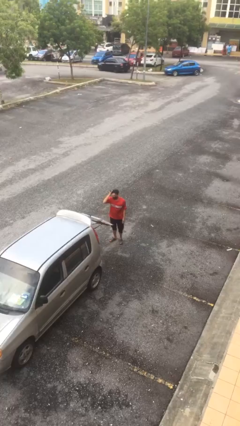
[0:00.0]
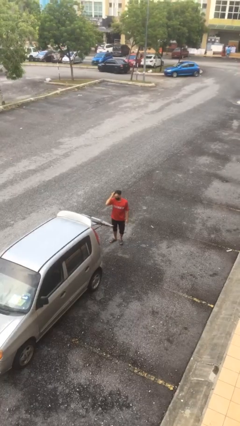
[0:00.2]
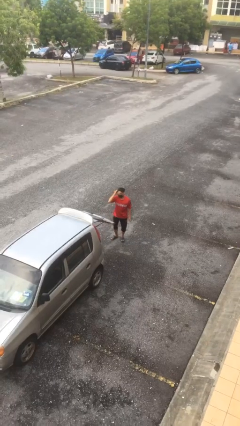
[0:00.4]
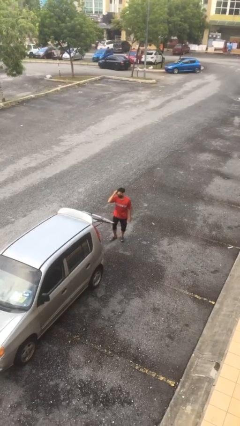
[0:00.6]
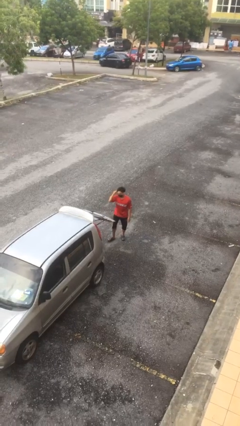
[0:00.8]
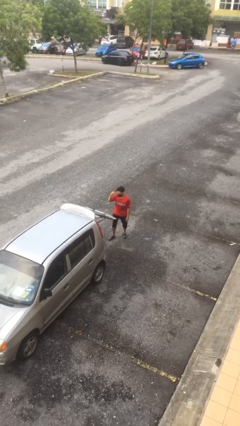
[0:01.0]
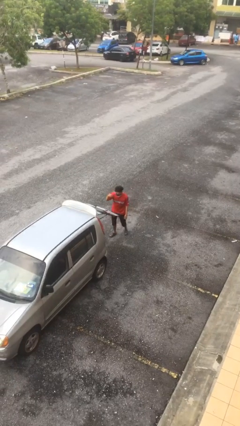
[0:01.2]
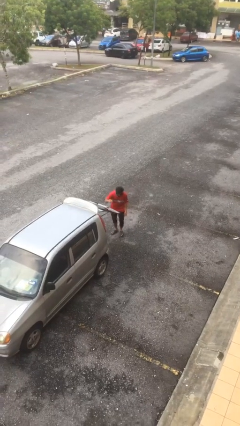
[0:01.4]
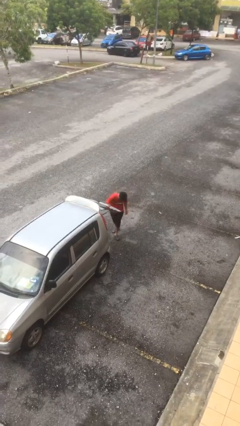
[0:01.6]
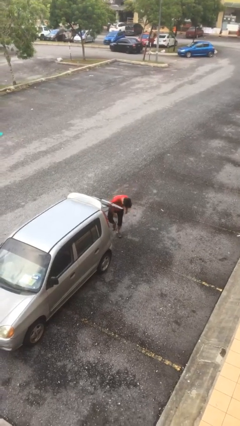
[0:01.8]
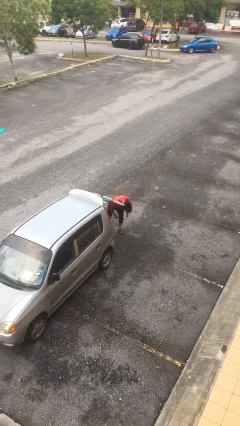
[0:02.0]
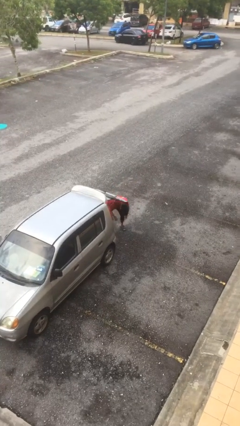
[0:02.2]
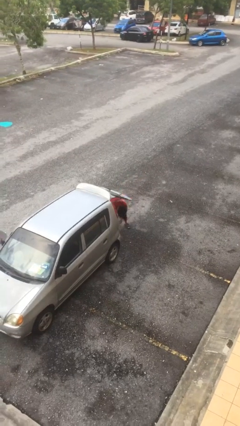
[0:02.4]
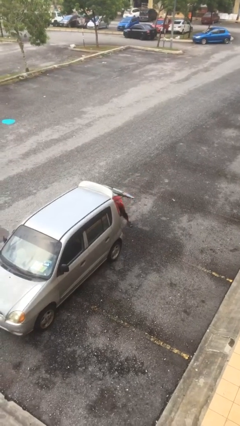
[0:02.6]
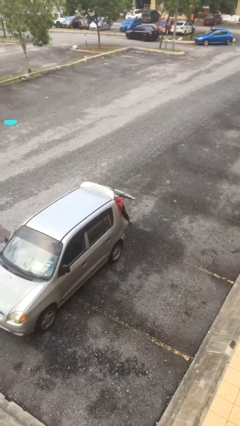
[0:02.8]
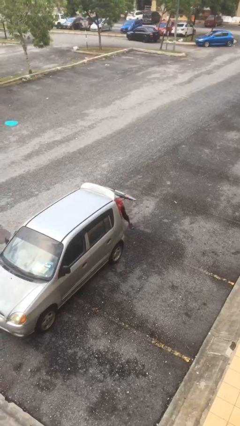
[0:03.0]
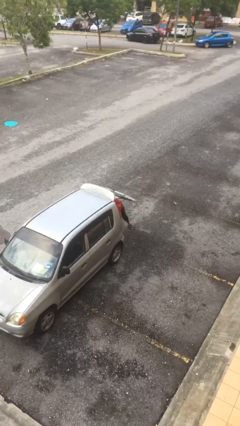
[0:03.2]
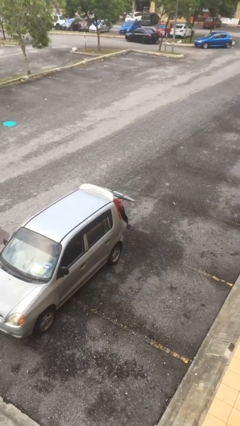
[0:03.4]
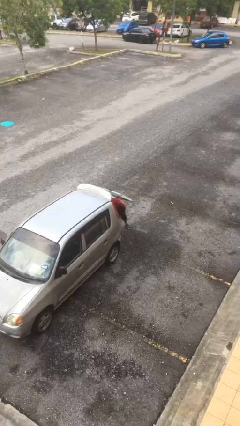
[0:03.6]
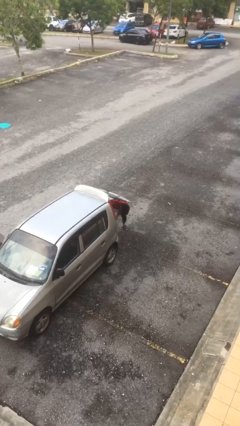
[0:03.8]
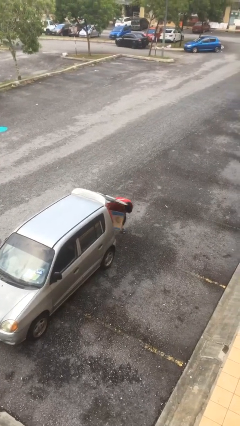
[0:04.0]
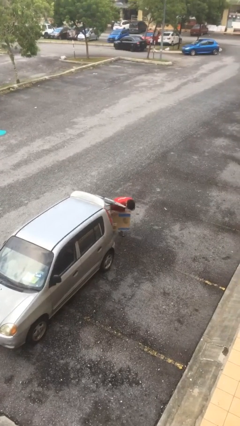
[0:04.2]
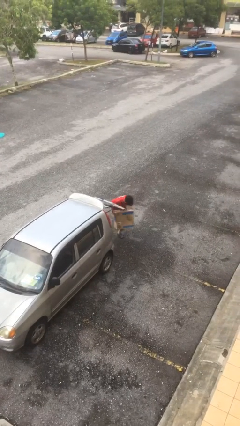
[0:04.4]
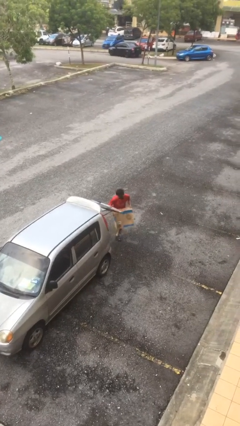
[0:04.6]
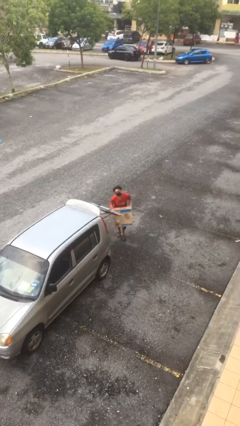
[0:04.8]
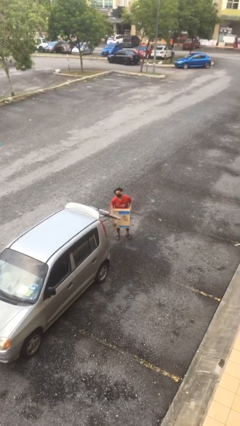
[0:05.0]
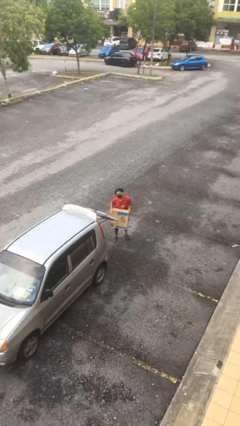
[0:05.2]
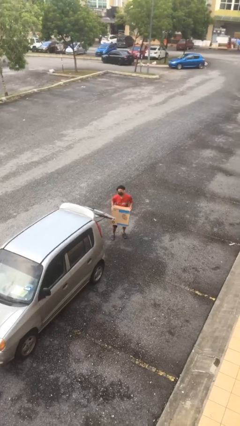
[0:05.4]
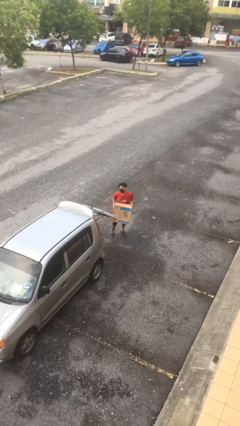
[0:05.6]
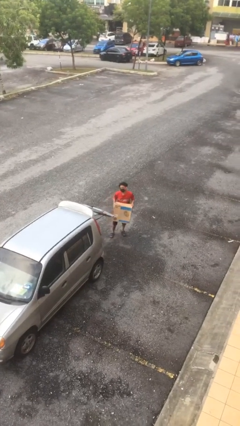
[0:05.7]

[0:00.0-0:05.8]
person unloads car

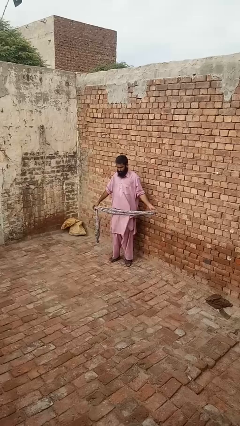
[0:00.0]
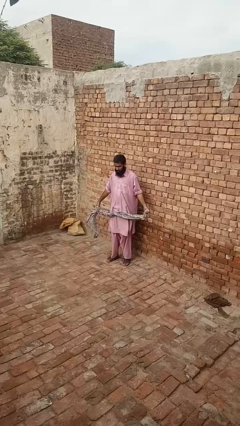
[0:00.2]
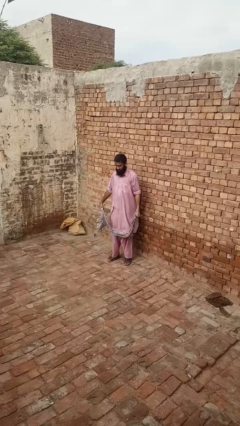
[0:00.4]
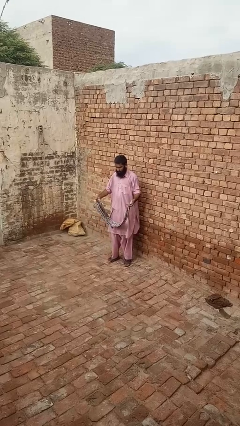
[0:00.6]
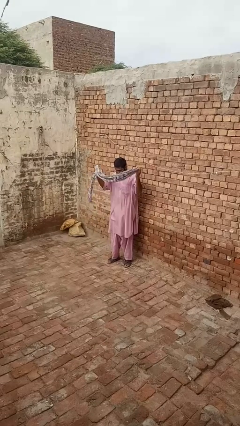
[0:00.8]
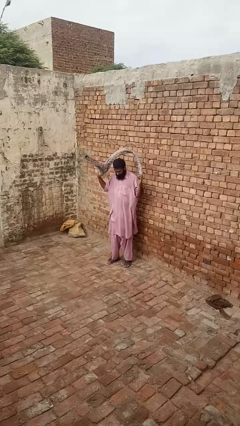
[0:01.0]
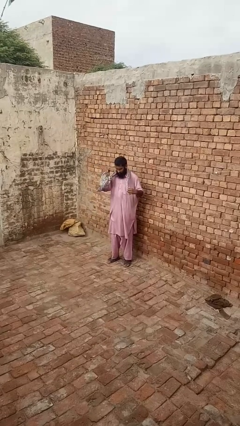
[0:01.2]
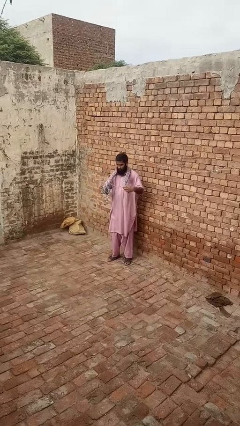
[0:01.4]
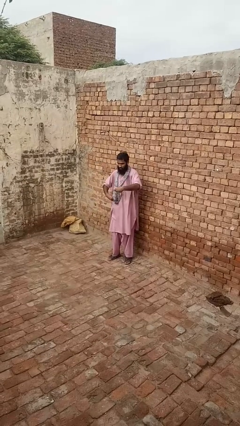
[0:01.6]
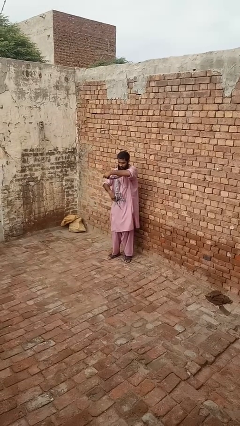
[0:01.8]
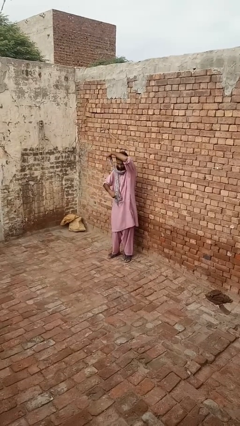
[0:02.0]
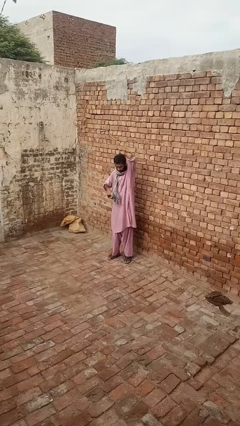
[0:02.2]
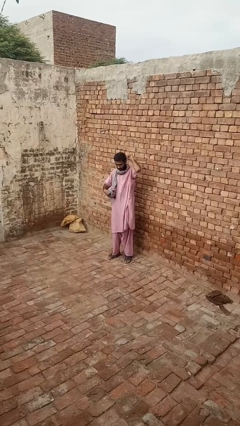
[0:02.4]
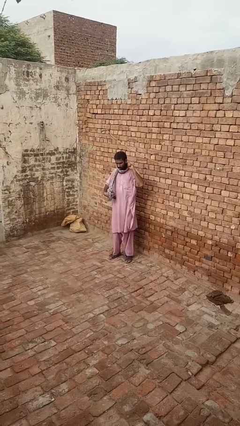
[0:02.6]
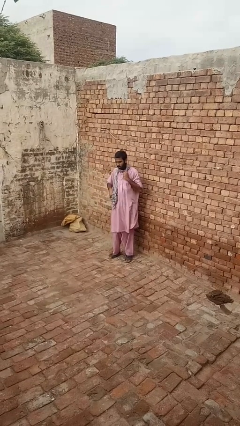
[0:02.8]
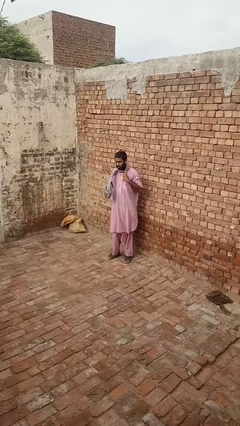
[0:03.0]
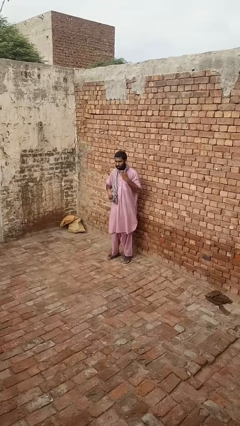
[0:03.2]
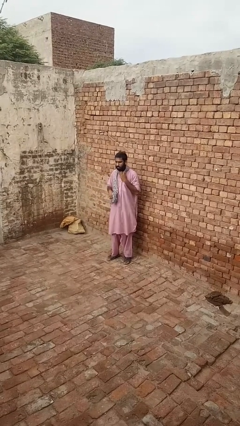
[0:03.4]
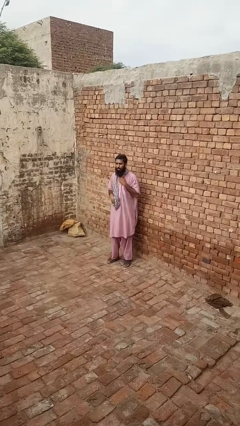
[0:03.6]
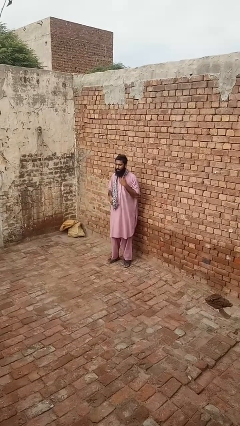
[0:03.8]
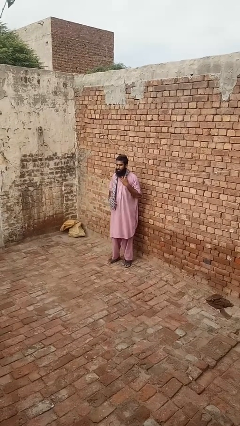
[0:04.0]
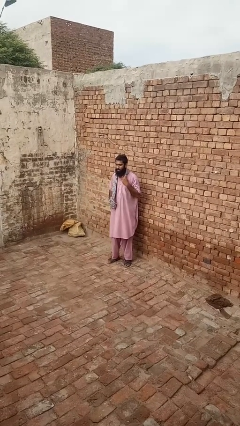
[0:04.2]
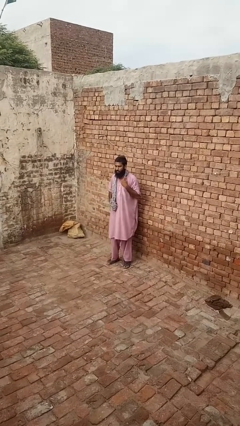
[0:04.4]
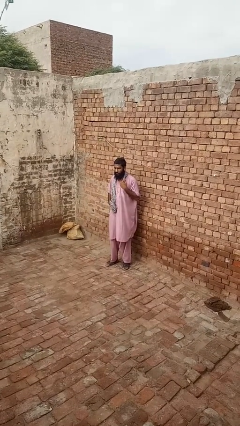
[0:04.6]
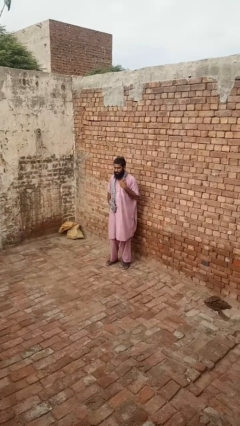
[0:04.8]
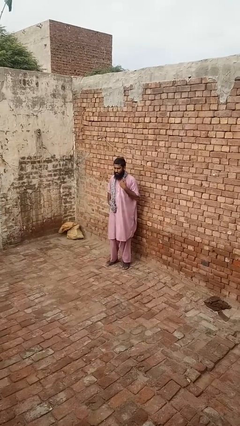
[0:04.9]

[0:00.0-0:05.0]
person puts on scarf

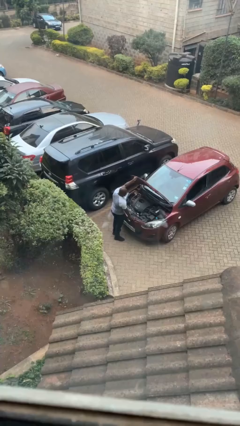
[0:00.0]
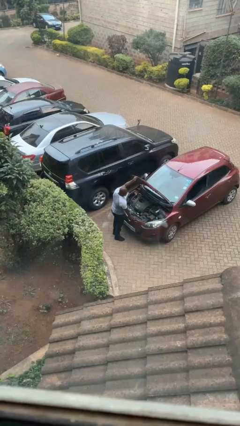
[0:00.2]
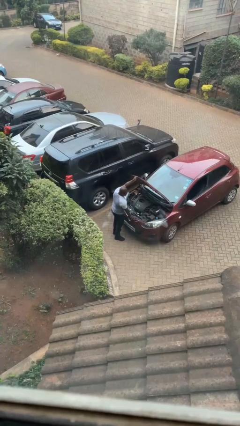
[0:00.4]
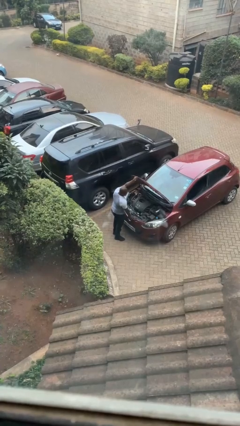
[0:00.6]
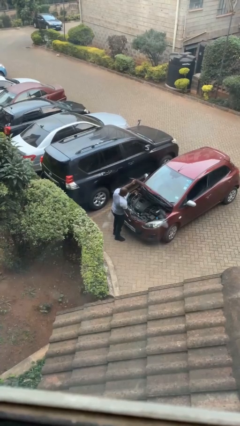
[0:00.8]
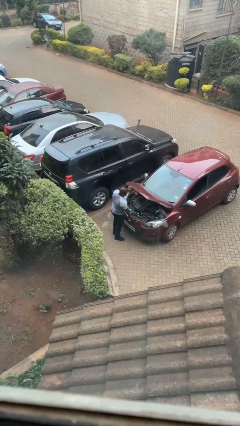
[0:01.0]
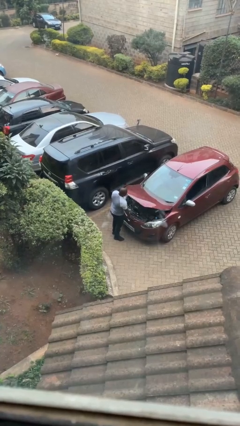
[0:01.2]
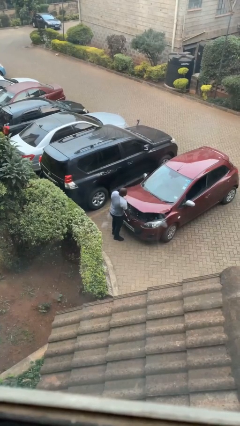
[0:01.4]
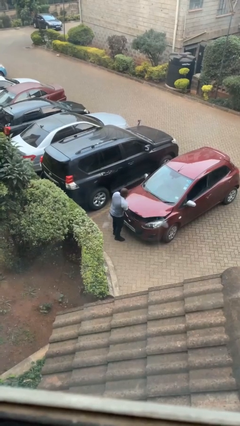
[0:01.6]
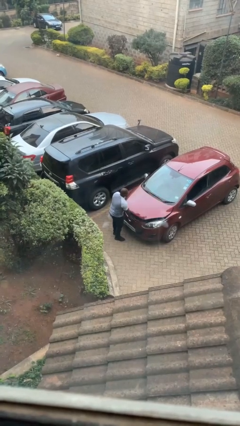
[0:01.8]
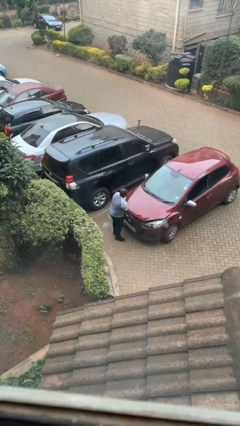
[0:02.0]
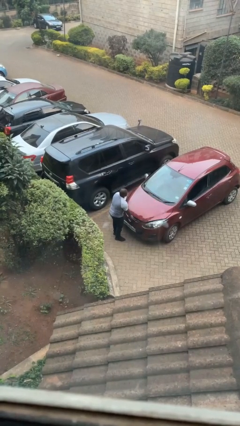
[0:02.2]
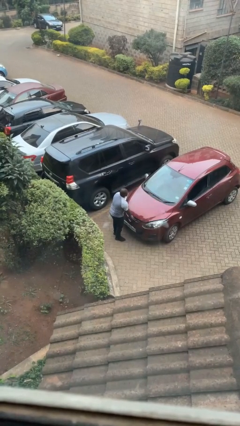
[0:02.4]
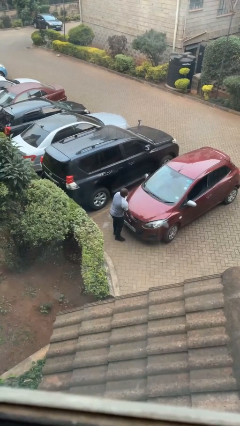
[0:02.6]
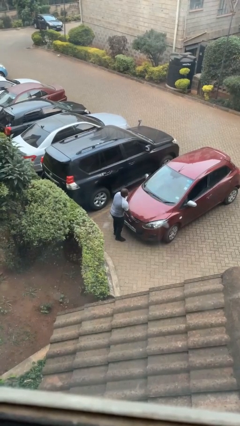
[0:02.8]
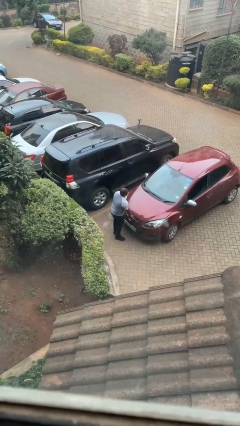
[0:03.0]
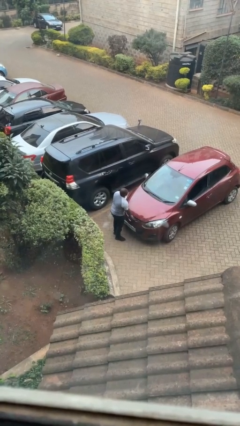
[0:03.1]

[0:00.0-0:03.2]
person closes car hood

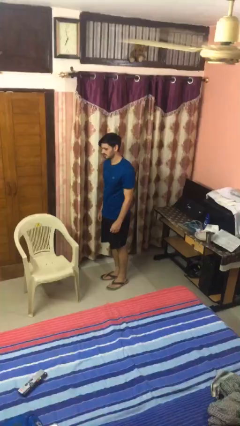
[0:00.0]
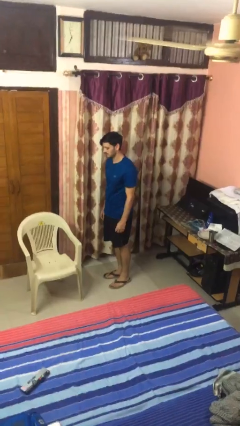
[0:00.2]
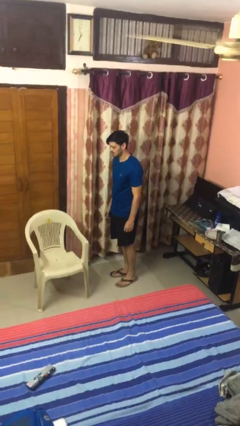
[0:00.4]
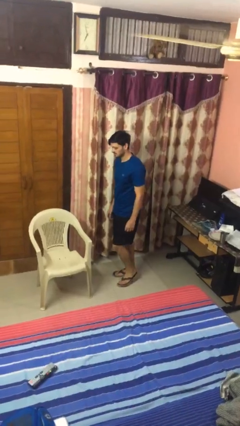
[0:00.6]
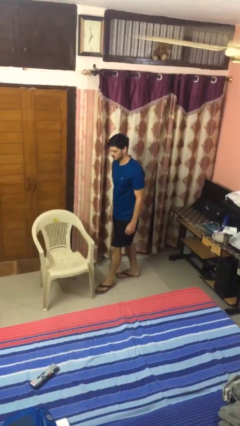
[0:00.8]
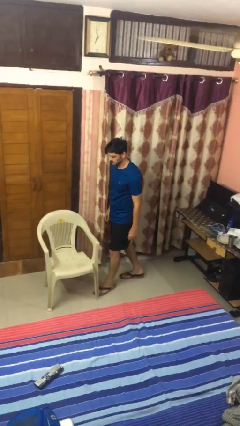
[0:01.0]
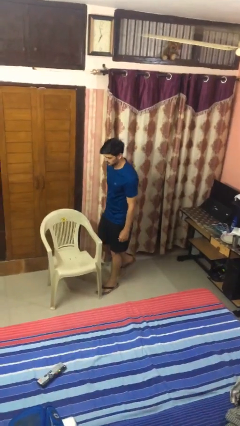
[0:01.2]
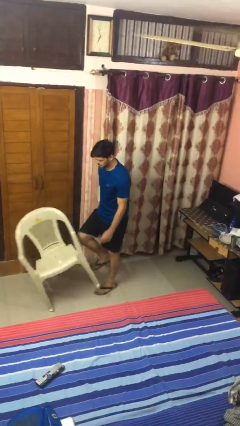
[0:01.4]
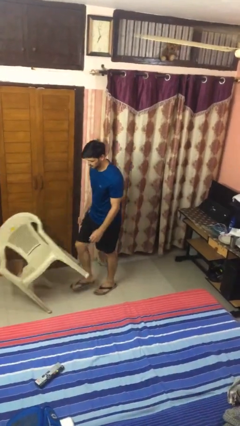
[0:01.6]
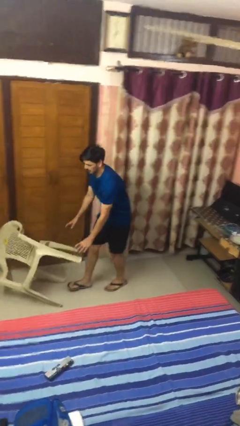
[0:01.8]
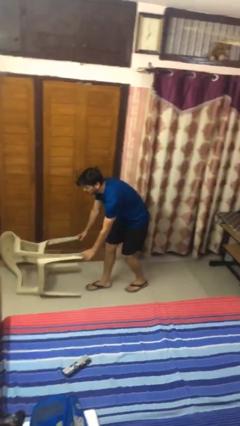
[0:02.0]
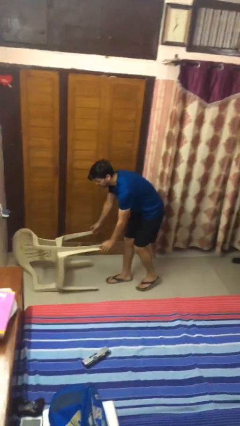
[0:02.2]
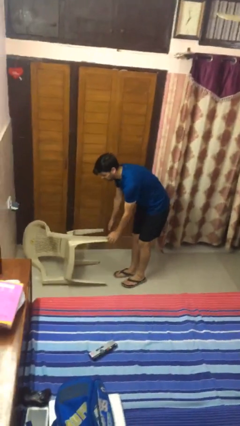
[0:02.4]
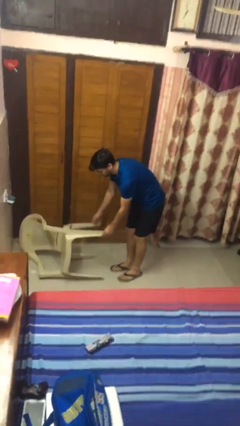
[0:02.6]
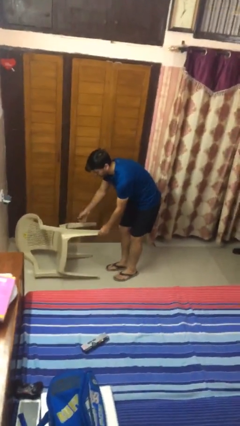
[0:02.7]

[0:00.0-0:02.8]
person knocks over furniture

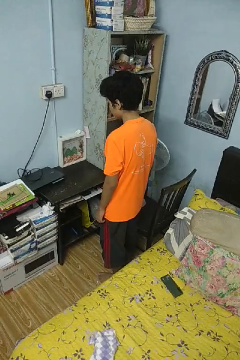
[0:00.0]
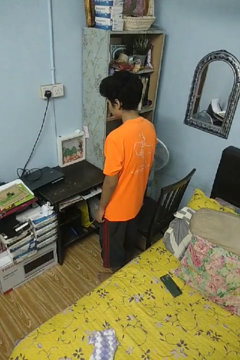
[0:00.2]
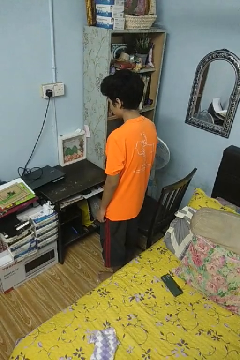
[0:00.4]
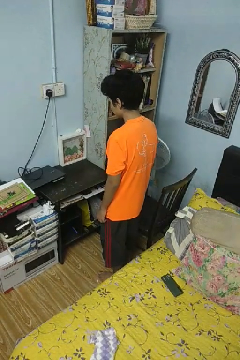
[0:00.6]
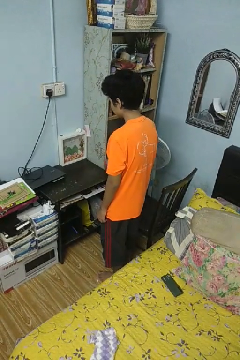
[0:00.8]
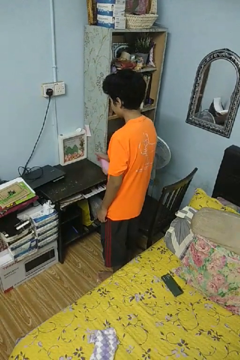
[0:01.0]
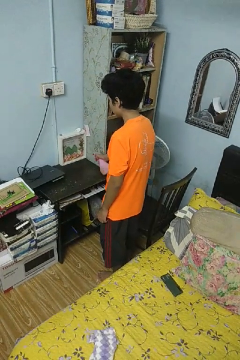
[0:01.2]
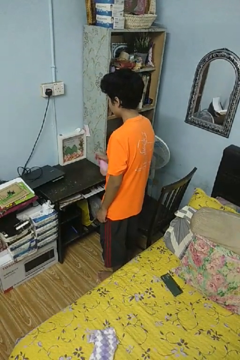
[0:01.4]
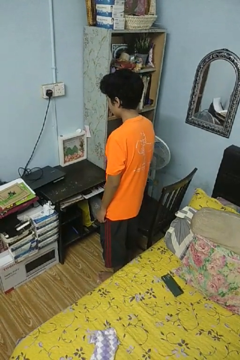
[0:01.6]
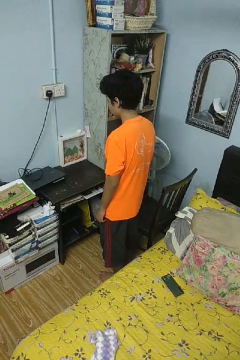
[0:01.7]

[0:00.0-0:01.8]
person sprays from bottle
